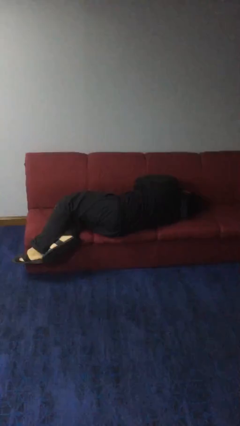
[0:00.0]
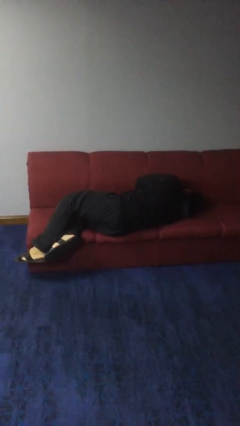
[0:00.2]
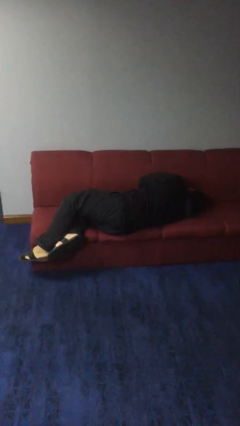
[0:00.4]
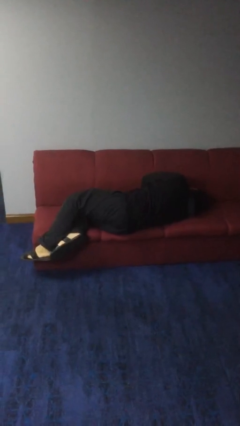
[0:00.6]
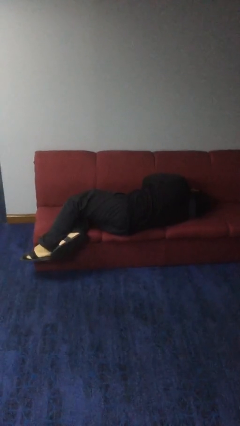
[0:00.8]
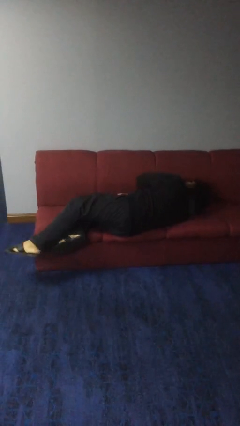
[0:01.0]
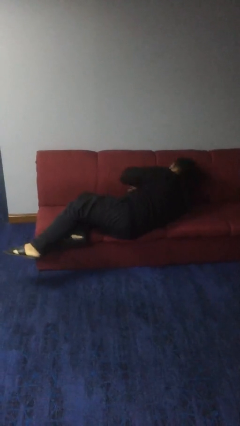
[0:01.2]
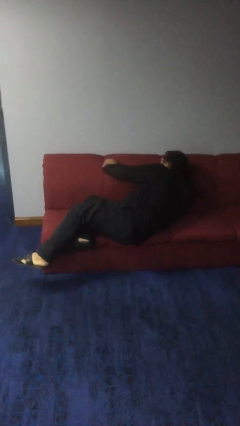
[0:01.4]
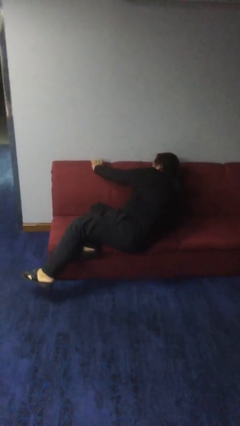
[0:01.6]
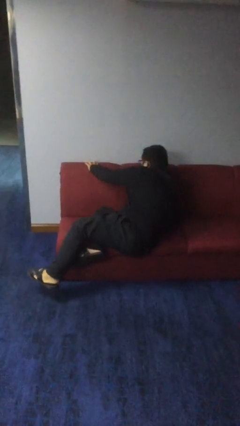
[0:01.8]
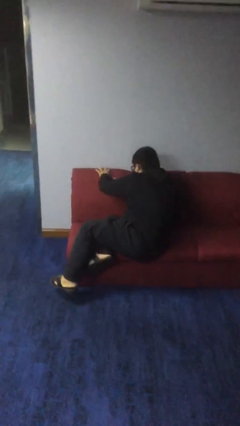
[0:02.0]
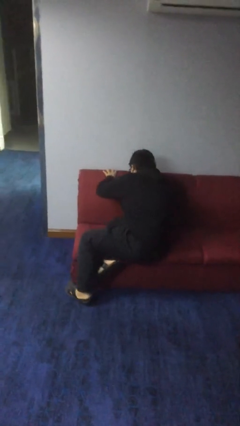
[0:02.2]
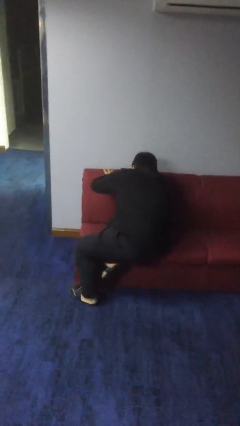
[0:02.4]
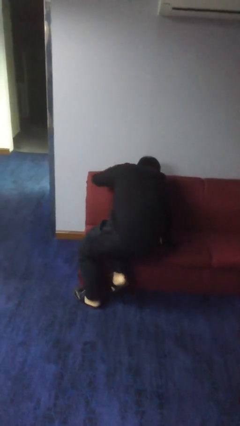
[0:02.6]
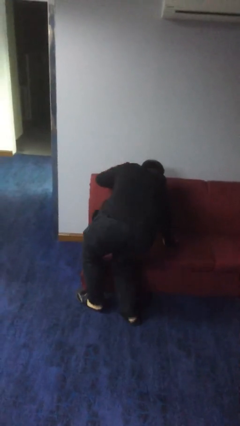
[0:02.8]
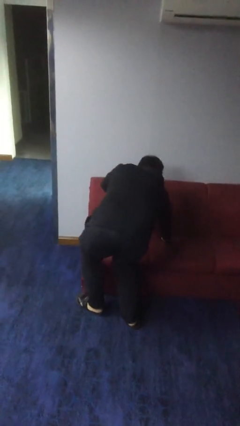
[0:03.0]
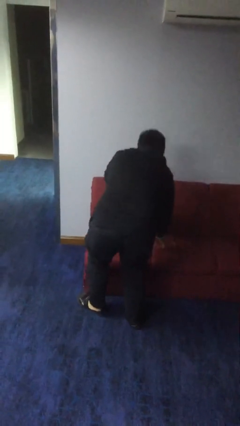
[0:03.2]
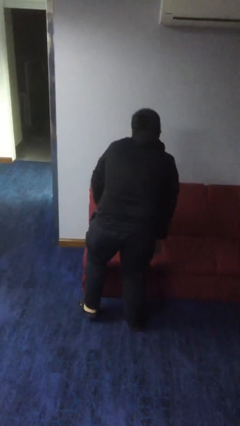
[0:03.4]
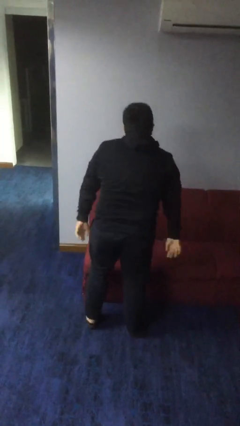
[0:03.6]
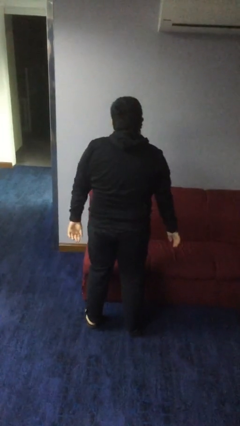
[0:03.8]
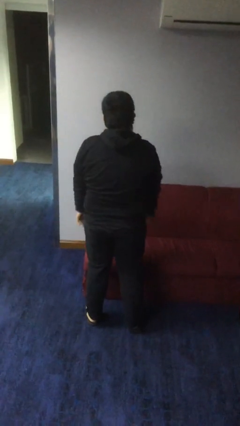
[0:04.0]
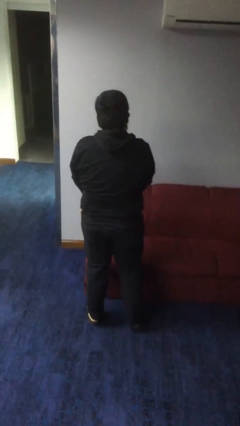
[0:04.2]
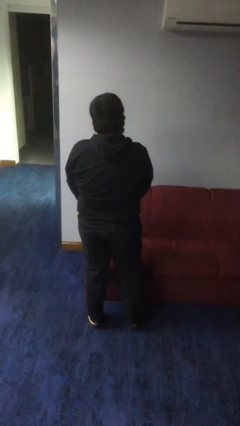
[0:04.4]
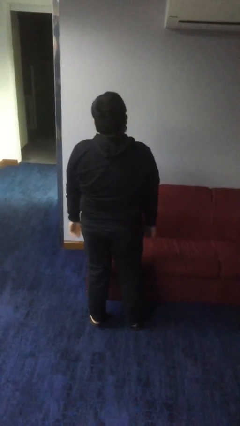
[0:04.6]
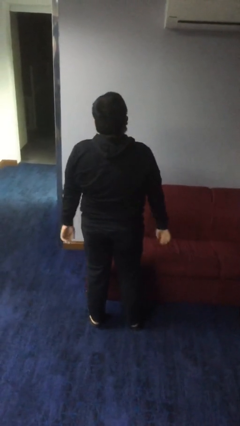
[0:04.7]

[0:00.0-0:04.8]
person stands up

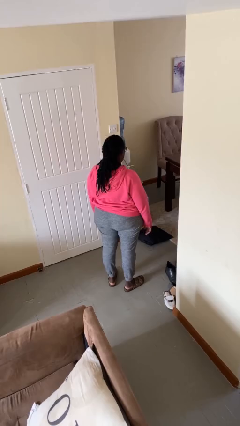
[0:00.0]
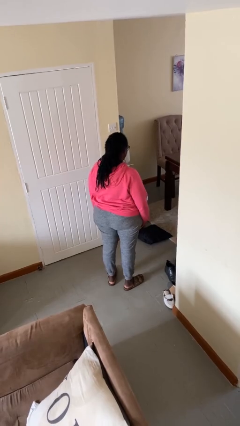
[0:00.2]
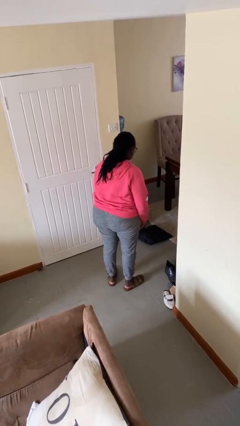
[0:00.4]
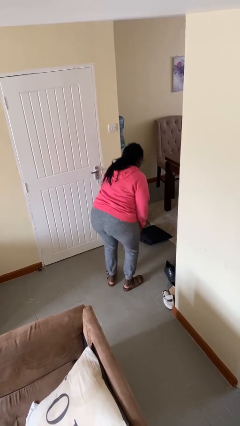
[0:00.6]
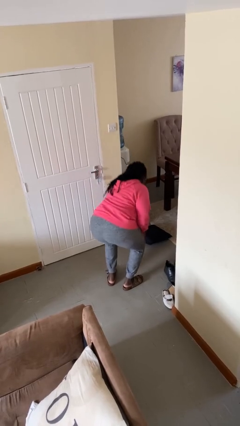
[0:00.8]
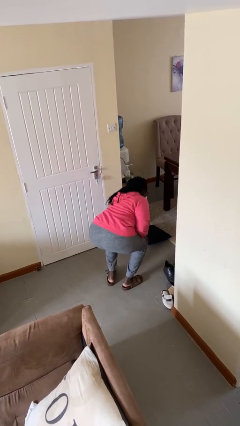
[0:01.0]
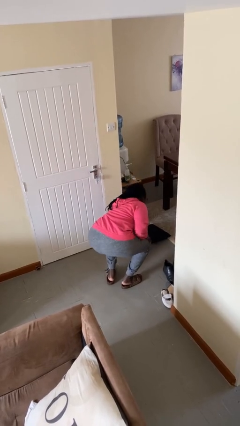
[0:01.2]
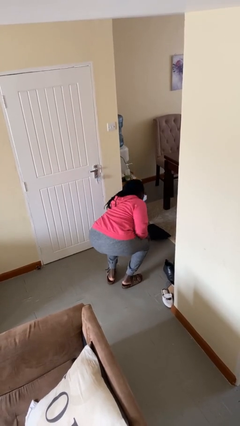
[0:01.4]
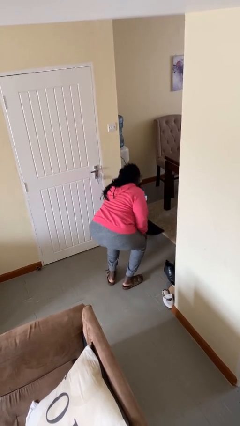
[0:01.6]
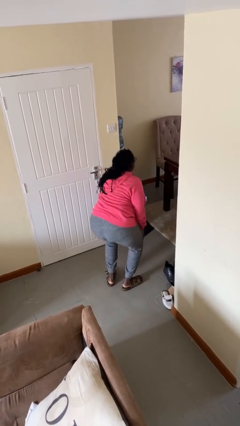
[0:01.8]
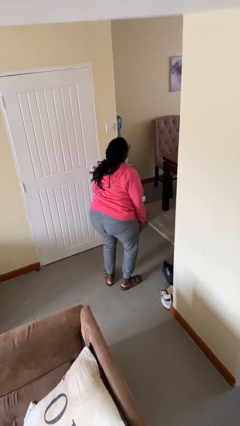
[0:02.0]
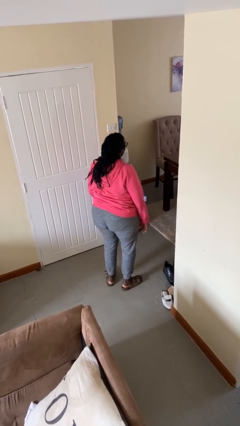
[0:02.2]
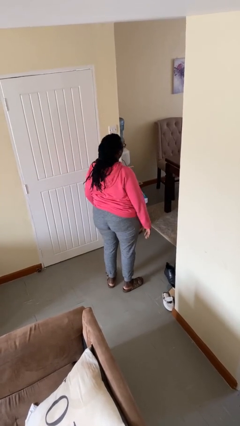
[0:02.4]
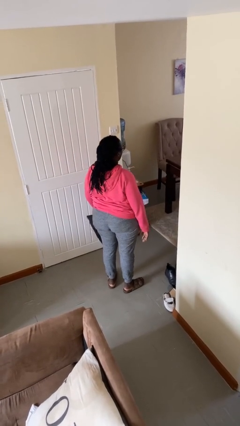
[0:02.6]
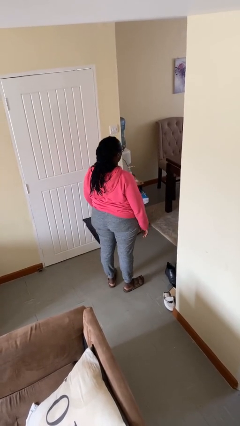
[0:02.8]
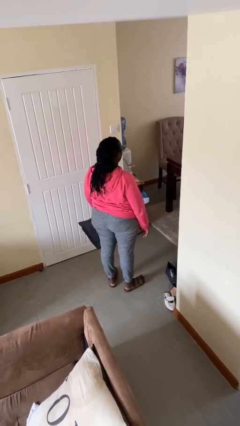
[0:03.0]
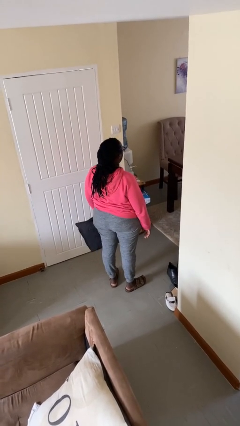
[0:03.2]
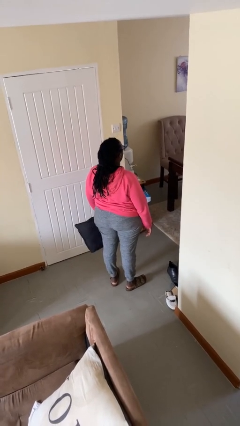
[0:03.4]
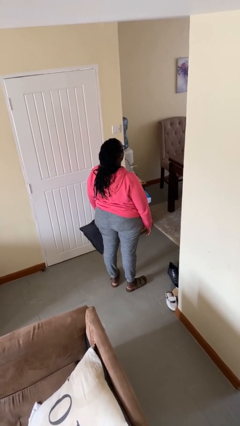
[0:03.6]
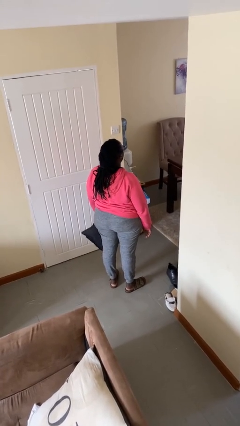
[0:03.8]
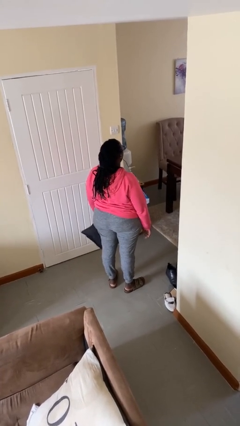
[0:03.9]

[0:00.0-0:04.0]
person picks up object from floor

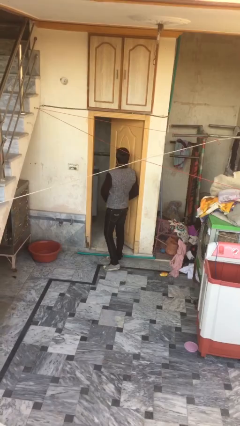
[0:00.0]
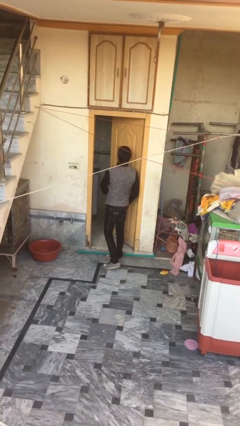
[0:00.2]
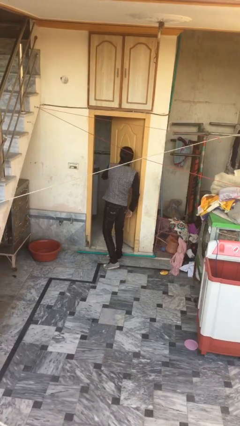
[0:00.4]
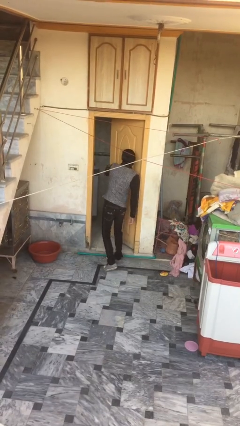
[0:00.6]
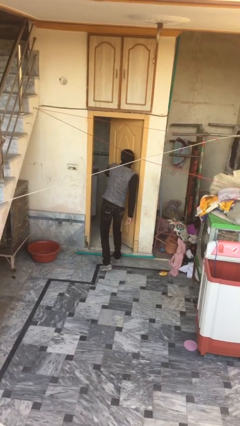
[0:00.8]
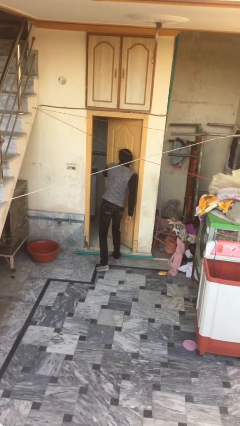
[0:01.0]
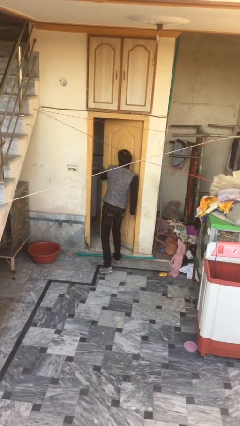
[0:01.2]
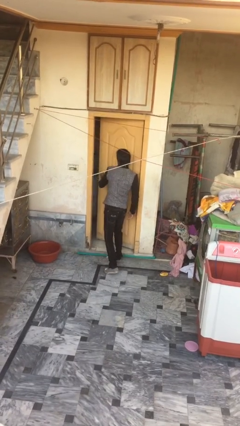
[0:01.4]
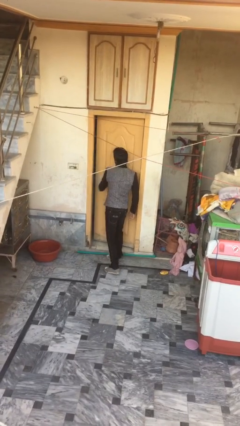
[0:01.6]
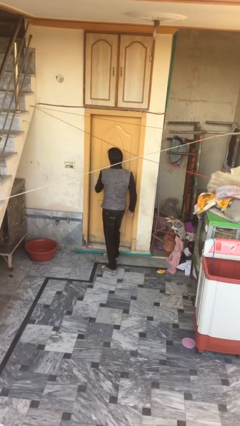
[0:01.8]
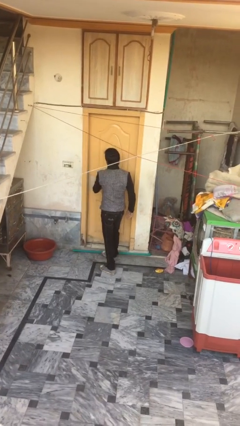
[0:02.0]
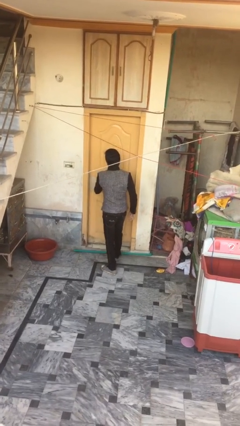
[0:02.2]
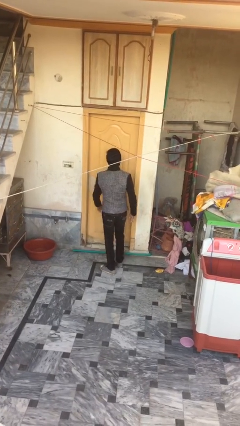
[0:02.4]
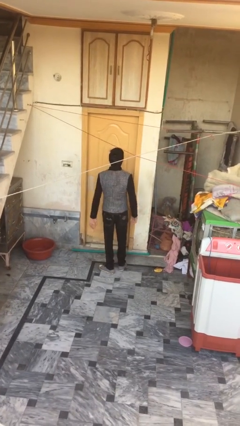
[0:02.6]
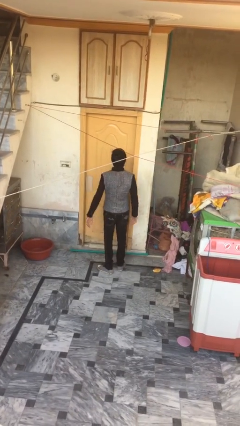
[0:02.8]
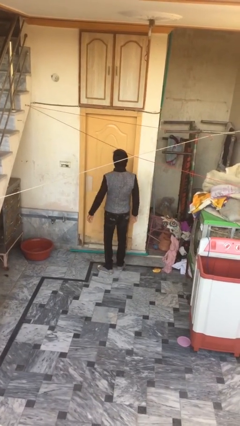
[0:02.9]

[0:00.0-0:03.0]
person closes facility door

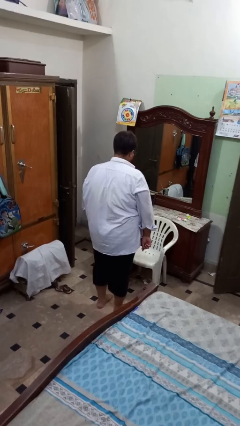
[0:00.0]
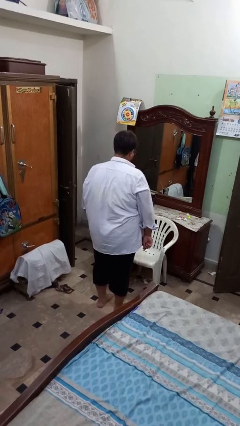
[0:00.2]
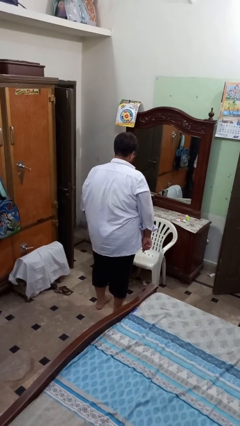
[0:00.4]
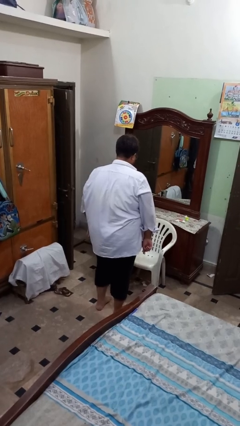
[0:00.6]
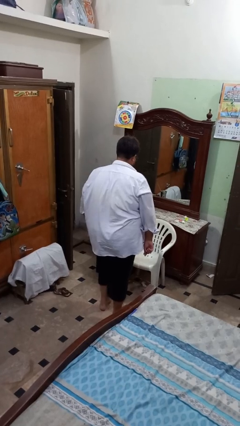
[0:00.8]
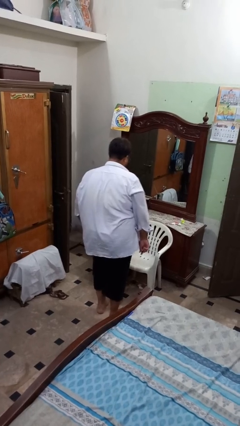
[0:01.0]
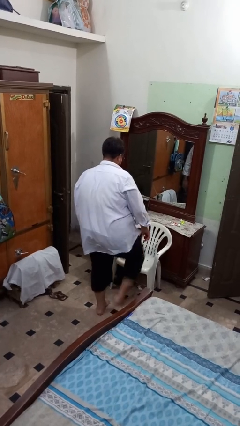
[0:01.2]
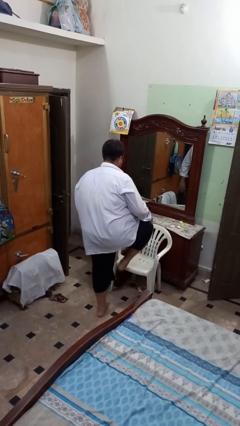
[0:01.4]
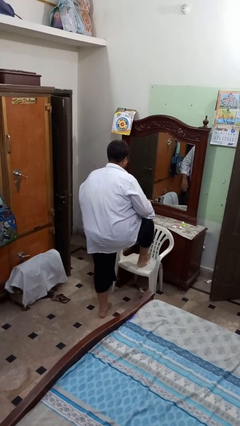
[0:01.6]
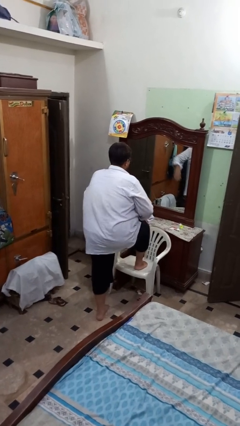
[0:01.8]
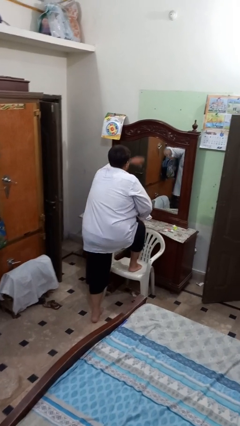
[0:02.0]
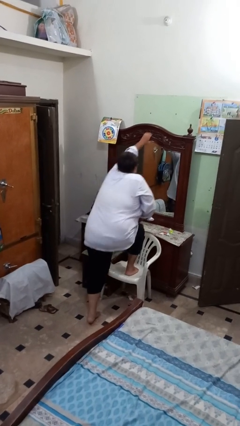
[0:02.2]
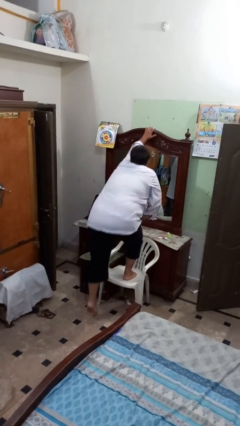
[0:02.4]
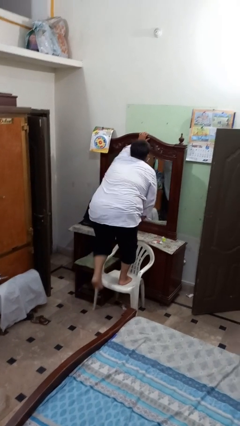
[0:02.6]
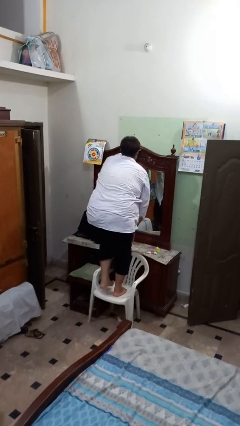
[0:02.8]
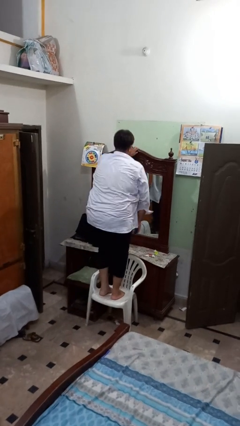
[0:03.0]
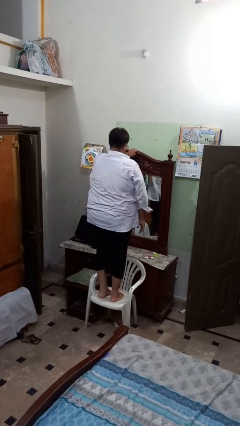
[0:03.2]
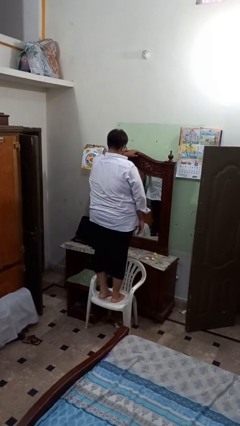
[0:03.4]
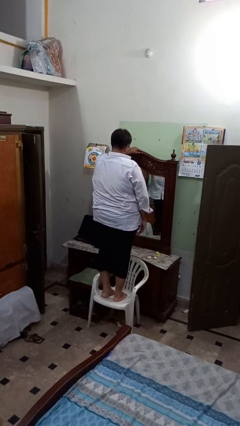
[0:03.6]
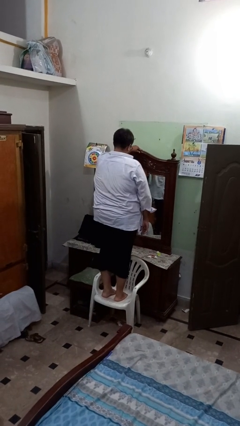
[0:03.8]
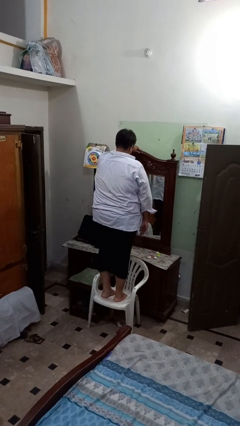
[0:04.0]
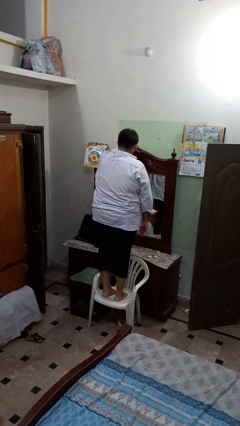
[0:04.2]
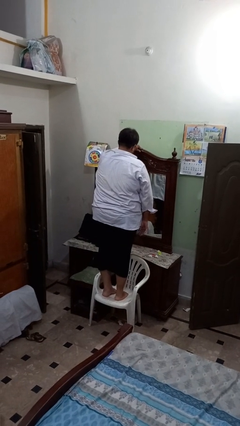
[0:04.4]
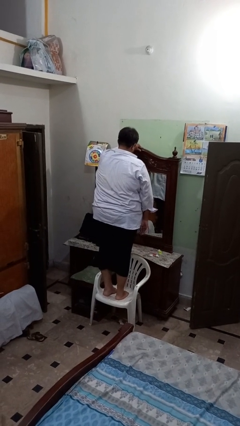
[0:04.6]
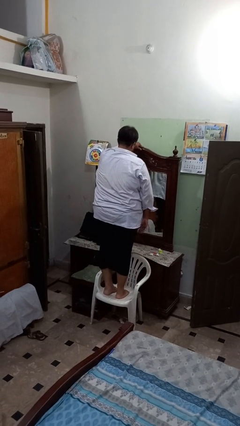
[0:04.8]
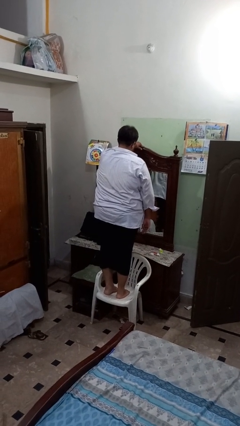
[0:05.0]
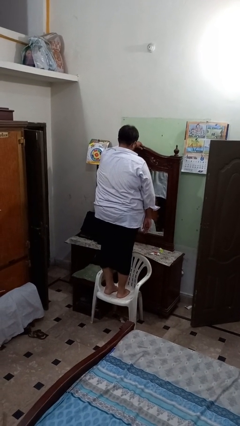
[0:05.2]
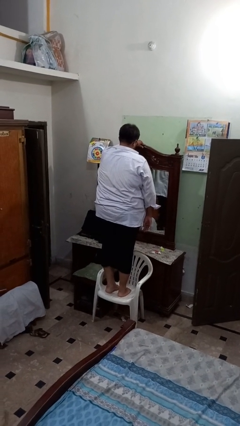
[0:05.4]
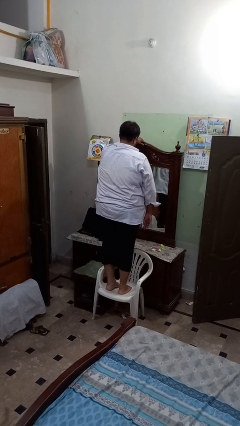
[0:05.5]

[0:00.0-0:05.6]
person climbs on chair

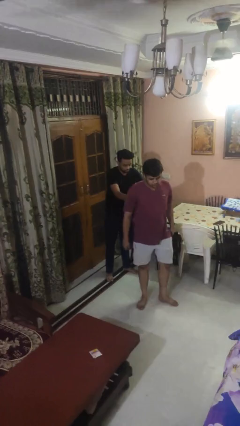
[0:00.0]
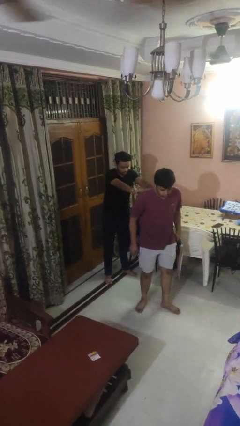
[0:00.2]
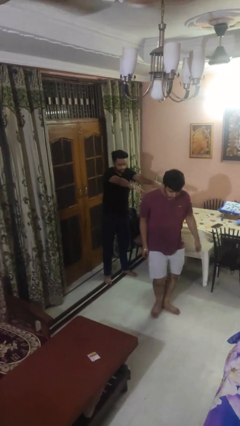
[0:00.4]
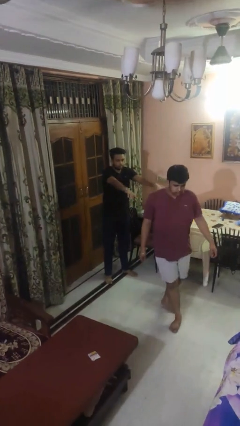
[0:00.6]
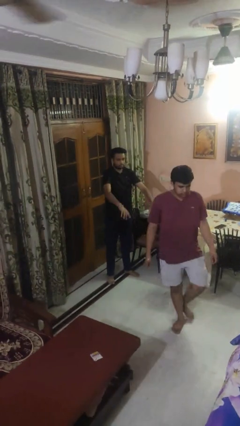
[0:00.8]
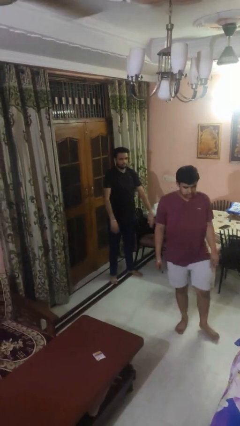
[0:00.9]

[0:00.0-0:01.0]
person shoves person
